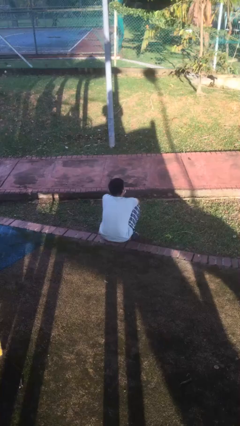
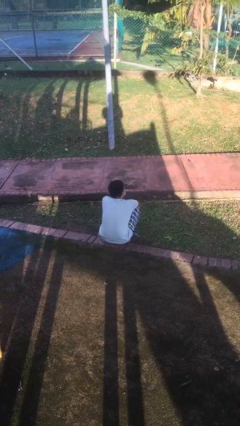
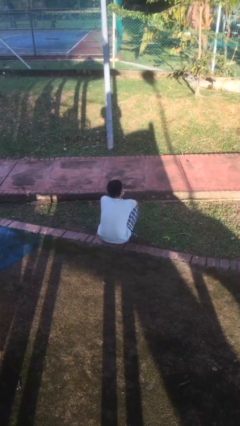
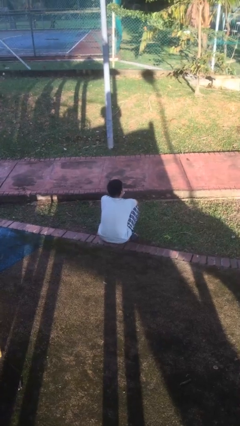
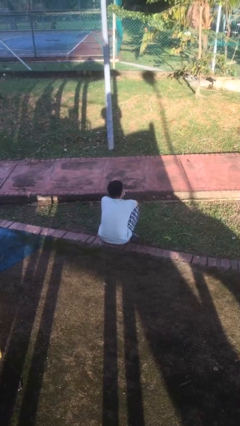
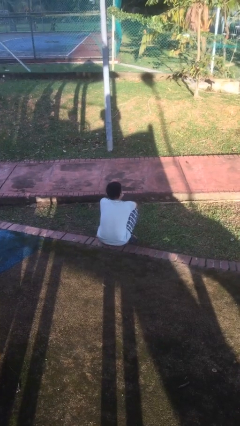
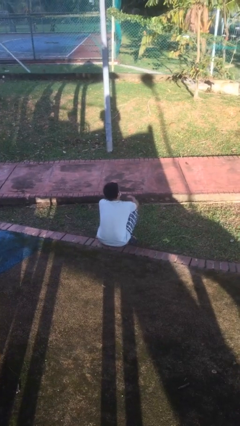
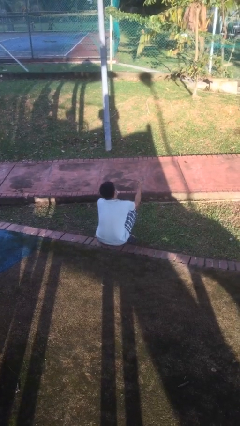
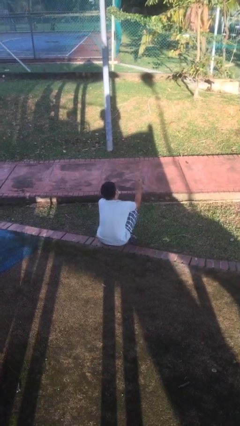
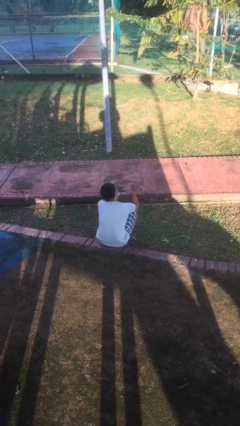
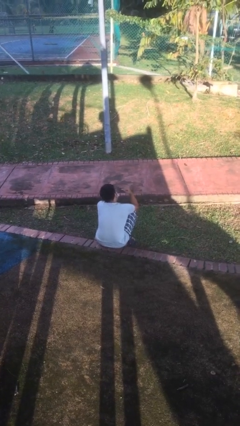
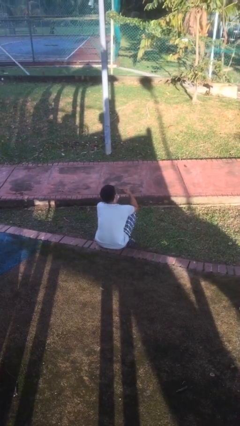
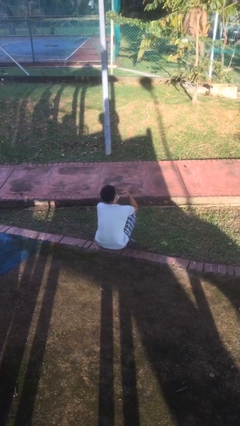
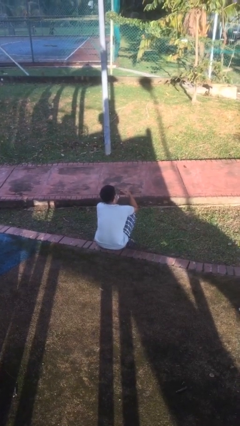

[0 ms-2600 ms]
person gestures listen closely

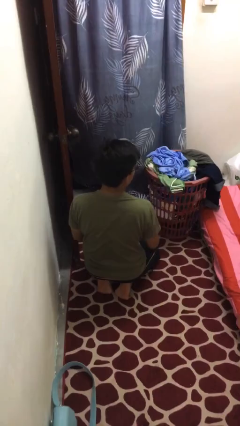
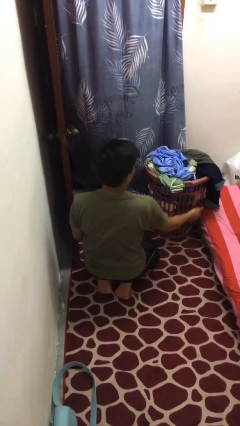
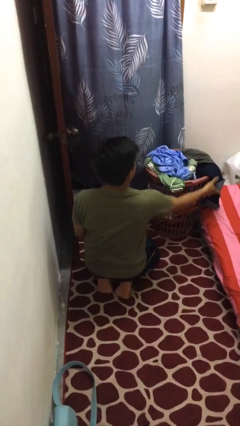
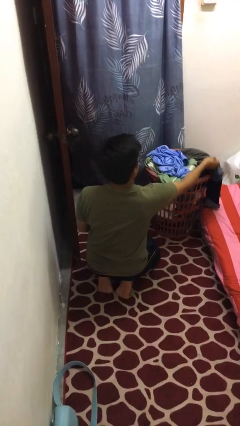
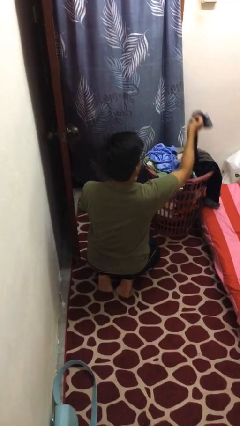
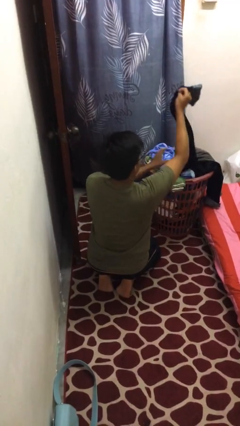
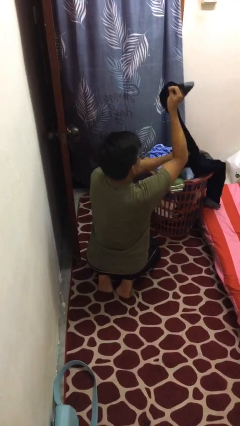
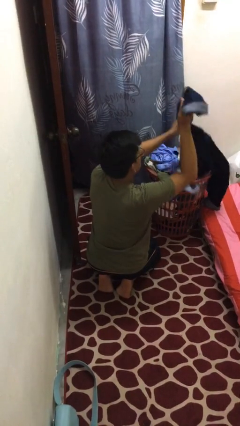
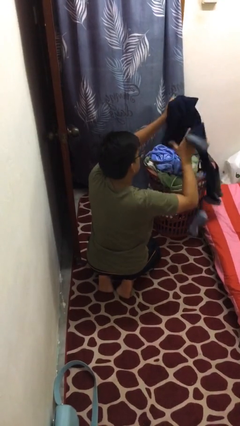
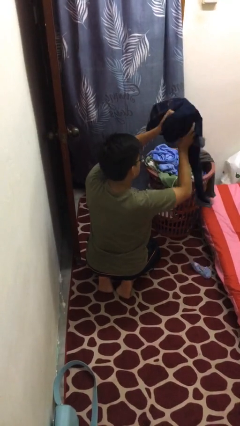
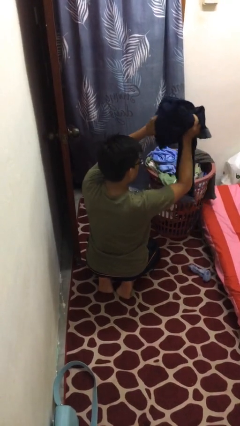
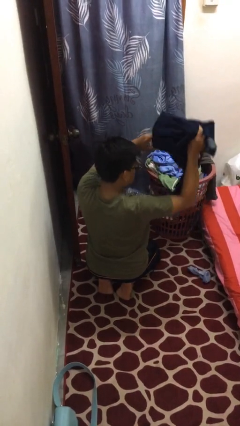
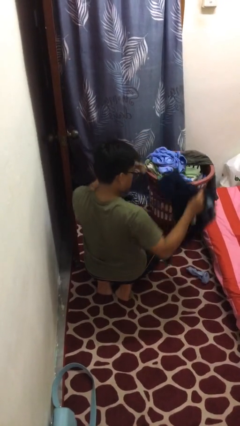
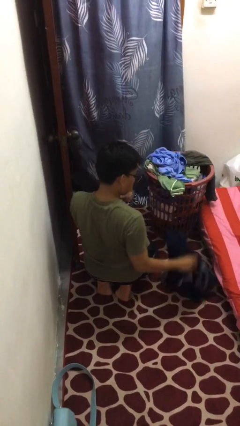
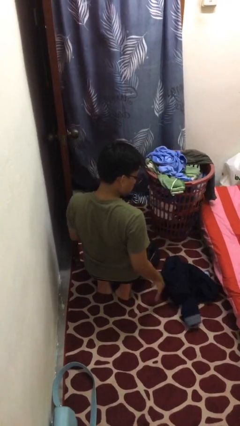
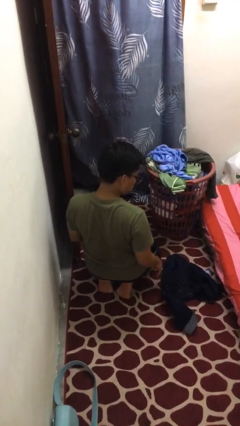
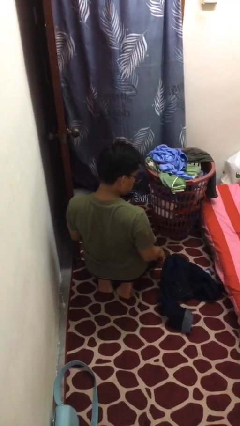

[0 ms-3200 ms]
person takes object from basket

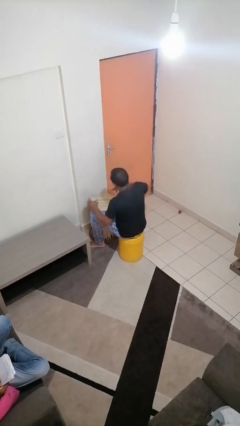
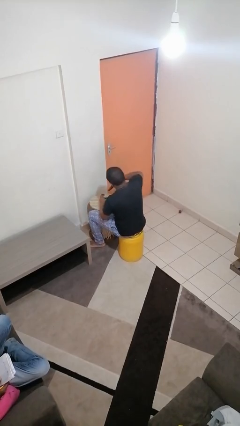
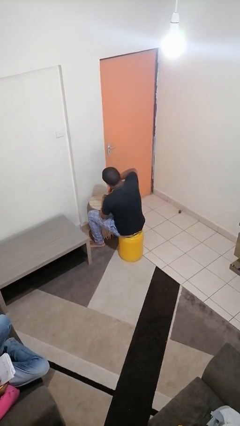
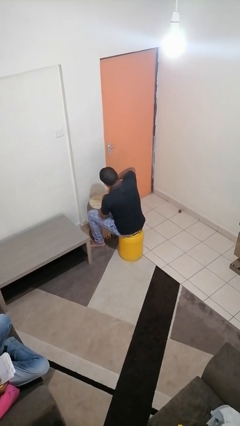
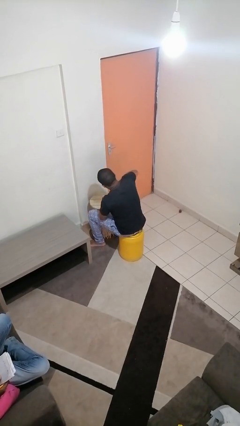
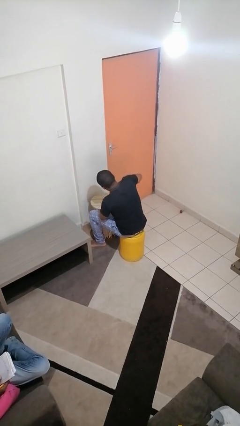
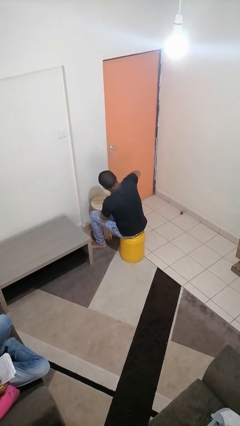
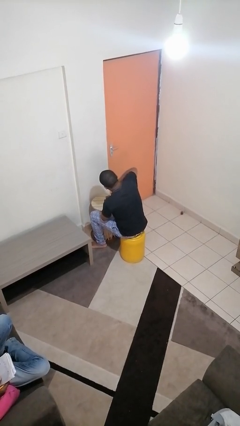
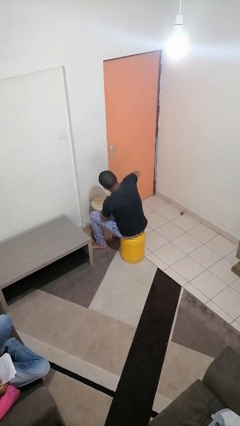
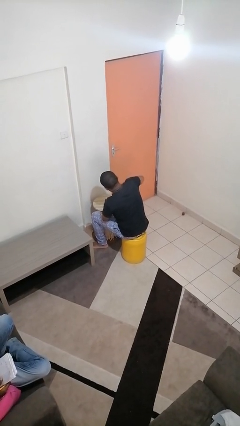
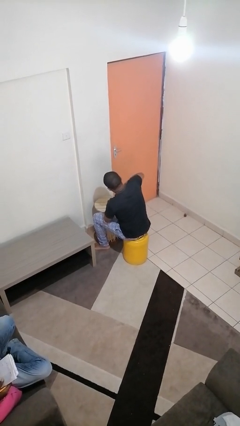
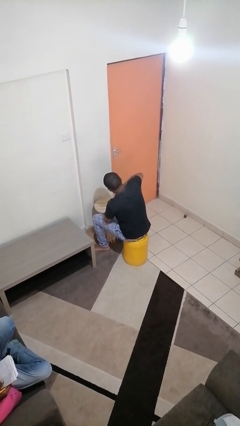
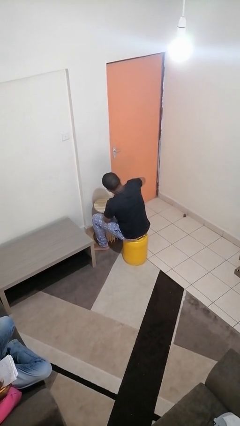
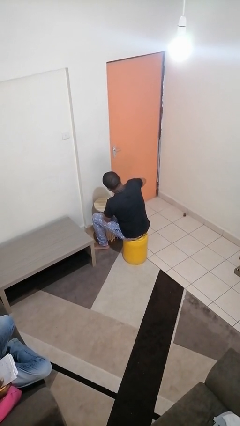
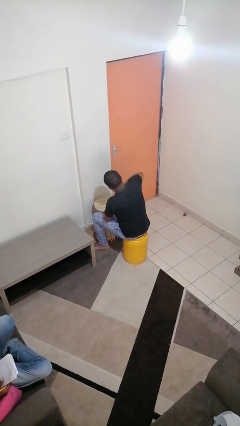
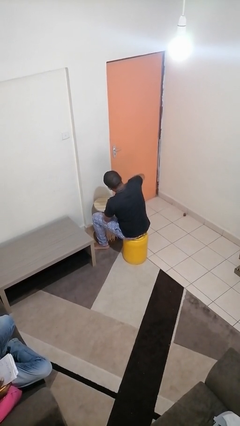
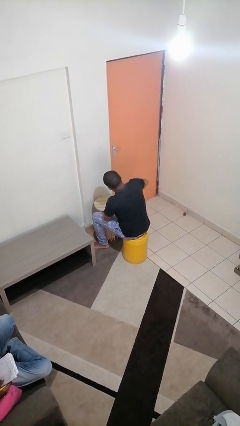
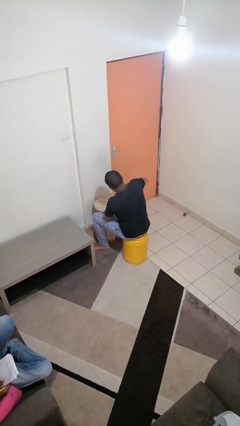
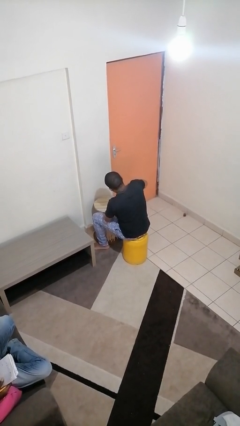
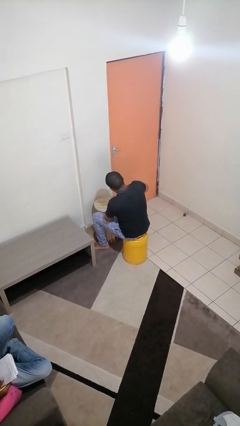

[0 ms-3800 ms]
person opens can with can opener

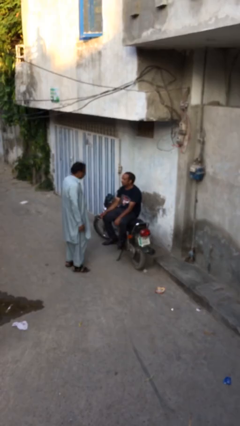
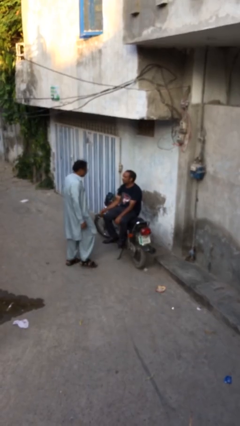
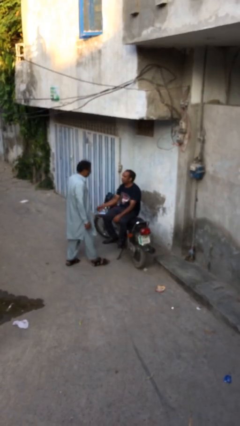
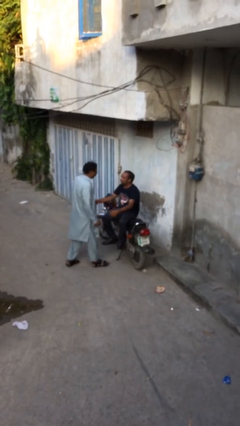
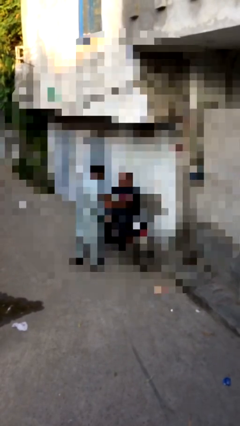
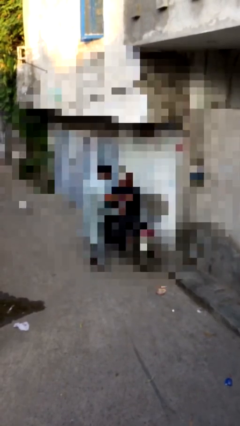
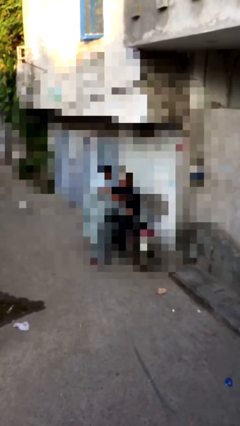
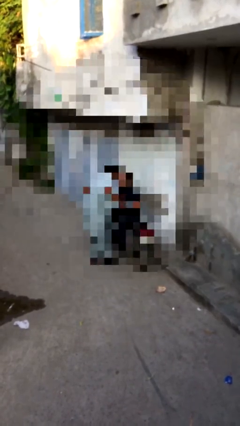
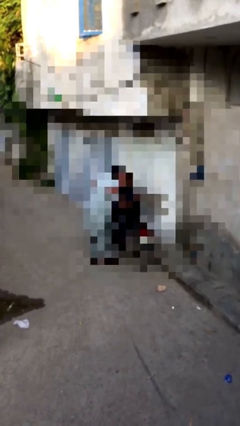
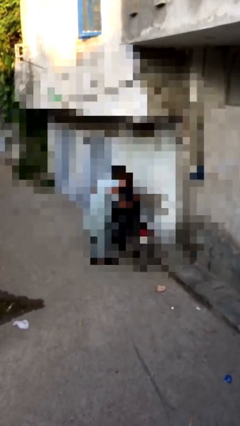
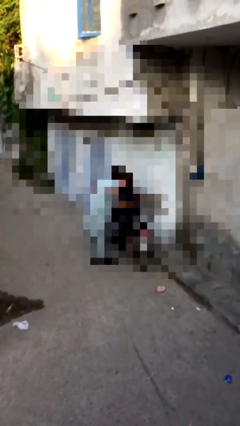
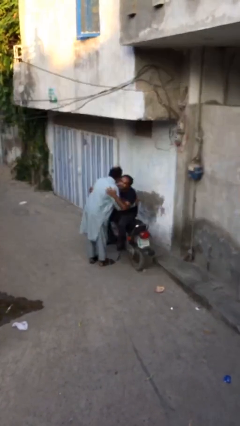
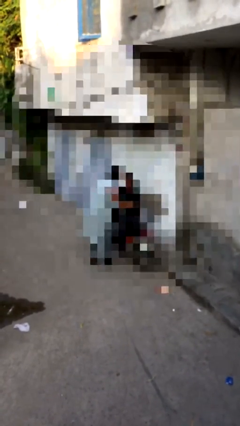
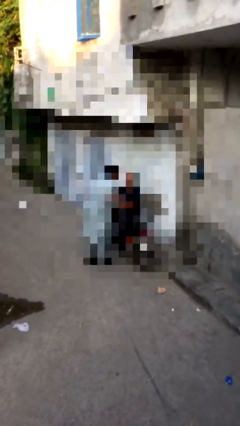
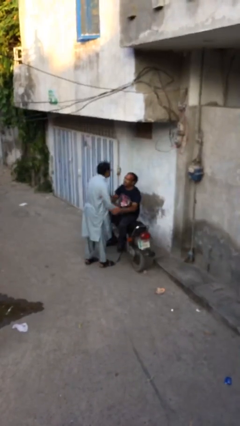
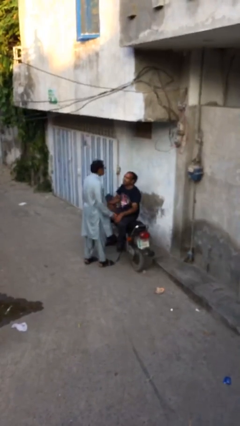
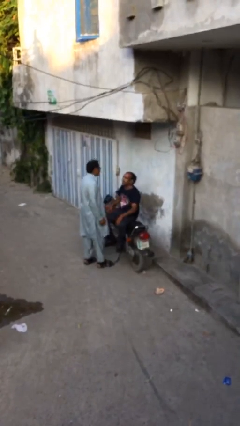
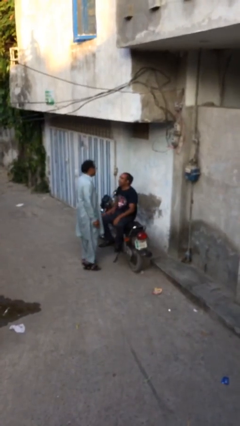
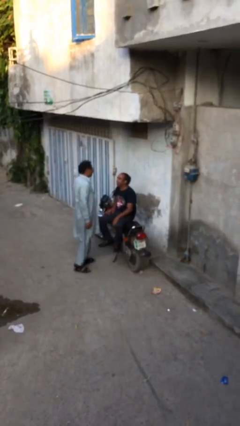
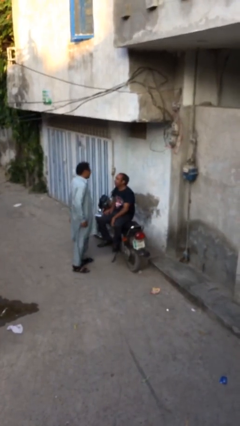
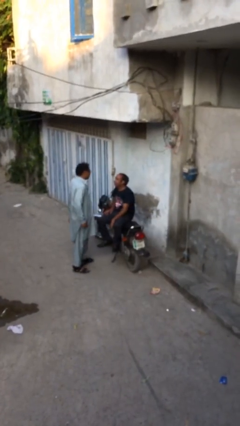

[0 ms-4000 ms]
person embraces person

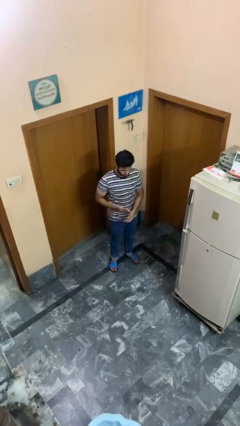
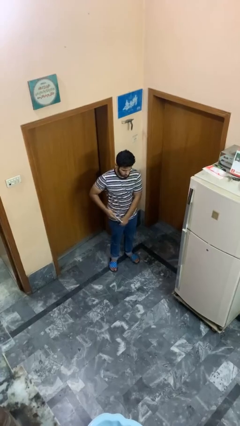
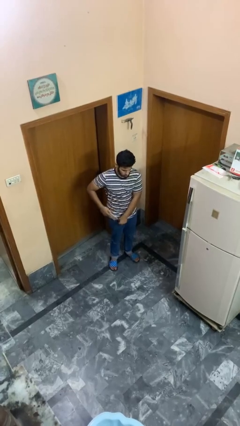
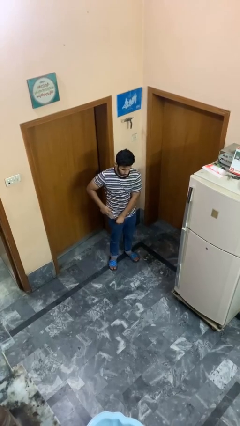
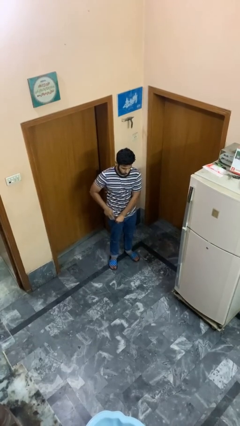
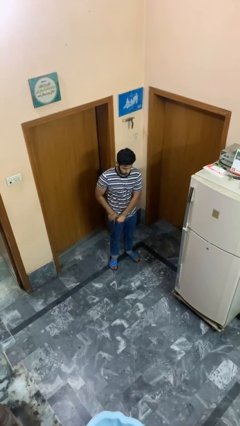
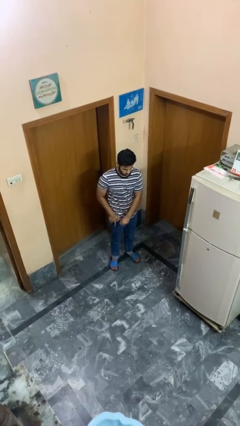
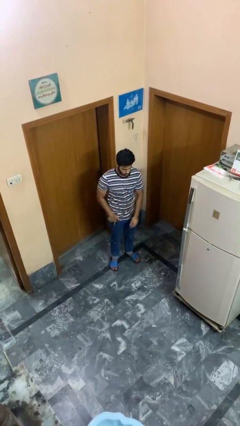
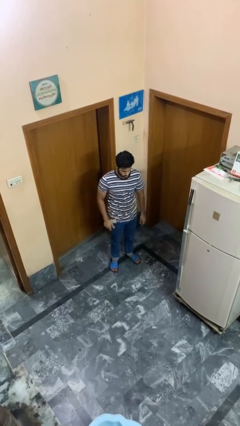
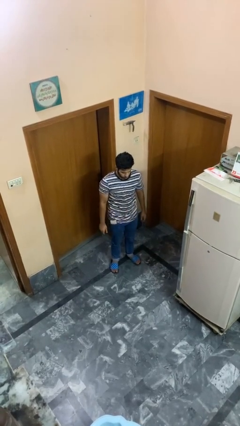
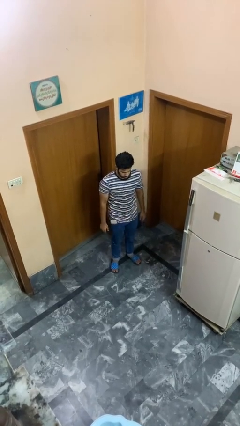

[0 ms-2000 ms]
person puts phone into pocket

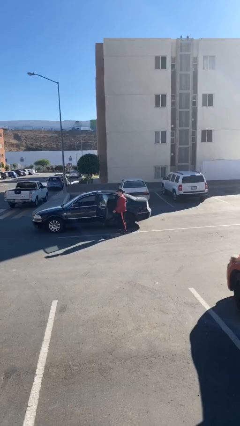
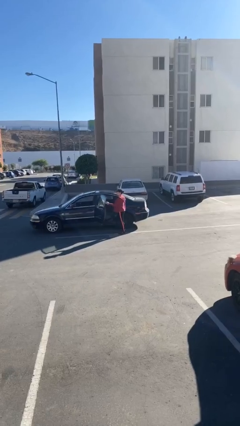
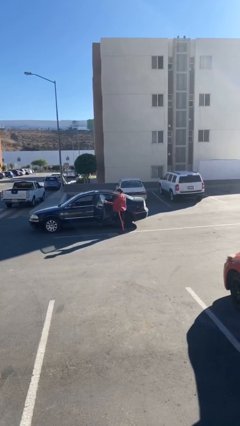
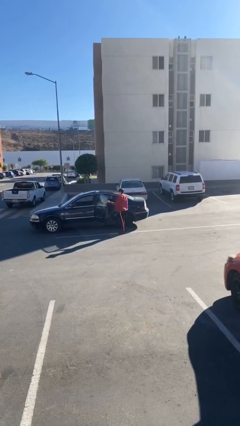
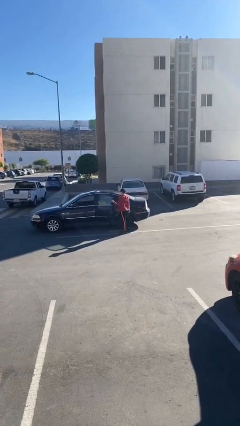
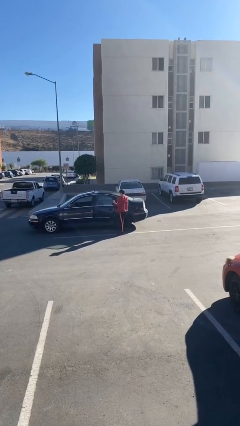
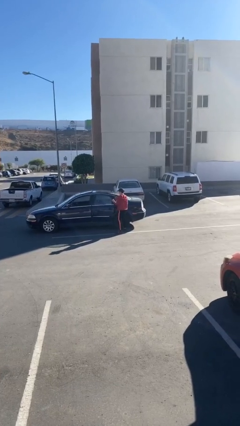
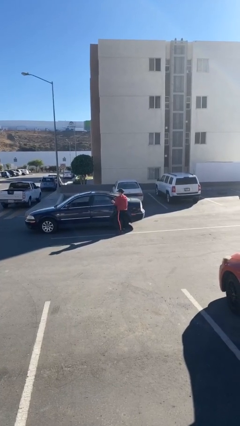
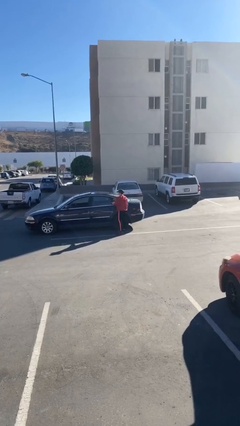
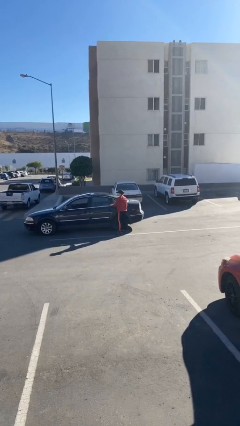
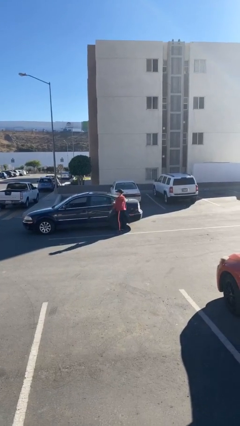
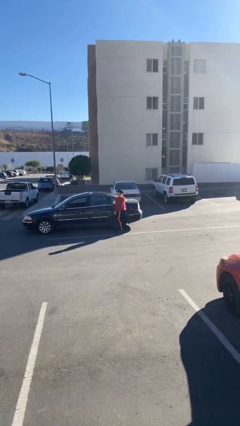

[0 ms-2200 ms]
person closes car door
